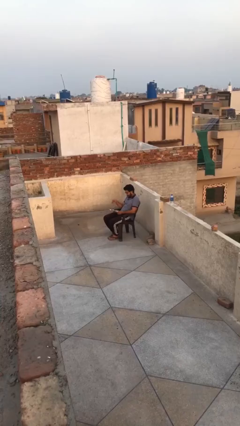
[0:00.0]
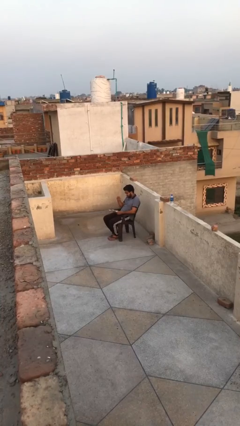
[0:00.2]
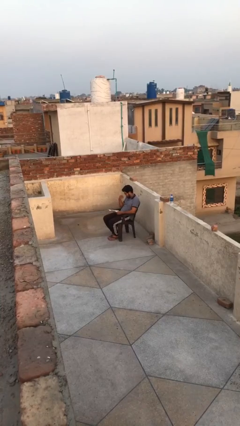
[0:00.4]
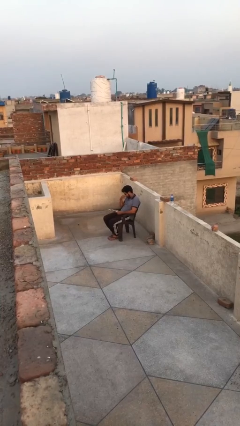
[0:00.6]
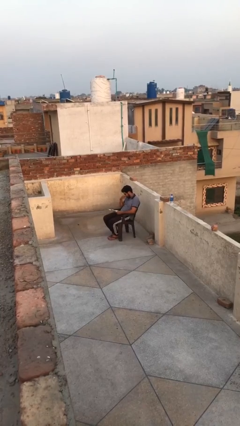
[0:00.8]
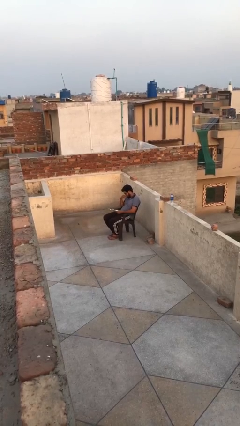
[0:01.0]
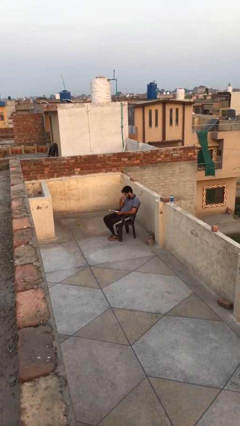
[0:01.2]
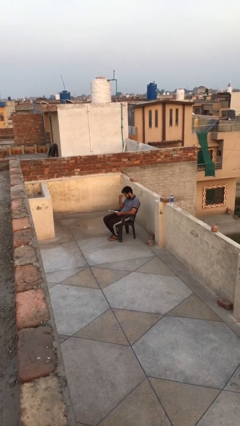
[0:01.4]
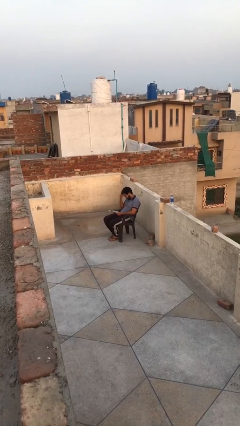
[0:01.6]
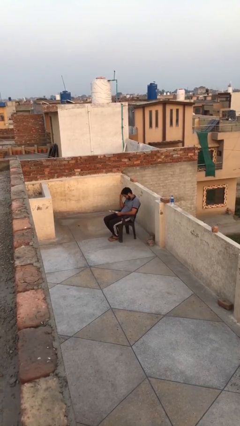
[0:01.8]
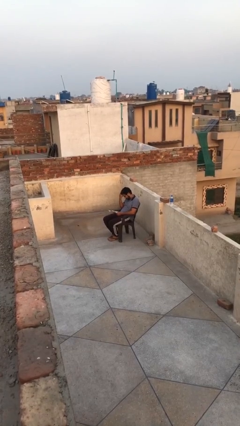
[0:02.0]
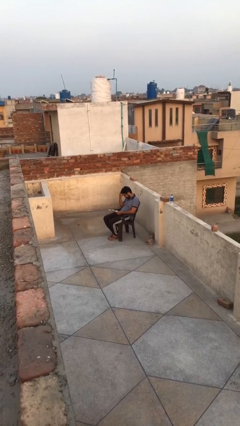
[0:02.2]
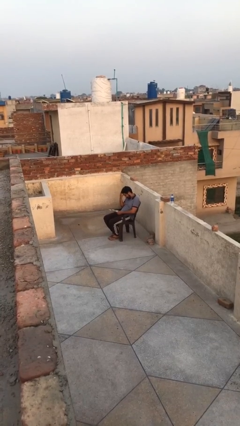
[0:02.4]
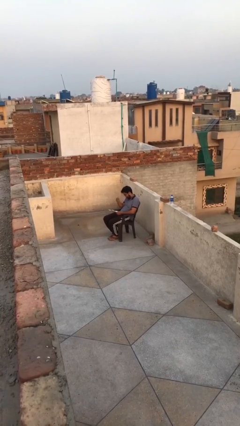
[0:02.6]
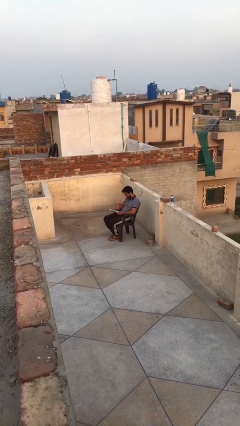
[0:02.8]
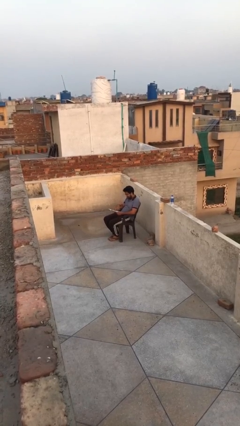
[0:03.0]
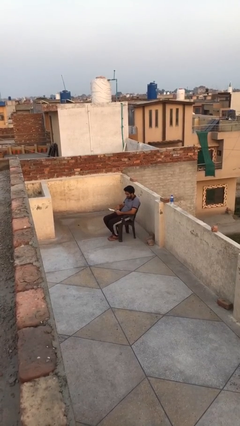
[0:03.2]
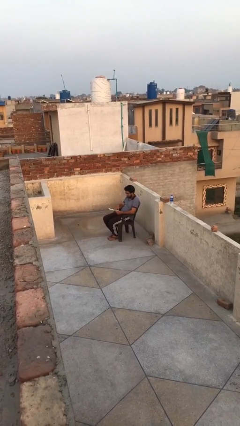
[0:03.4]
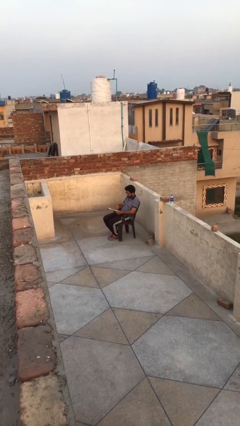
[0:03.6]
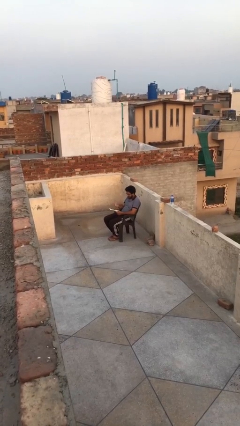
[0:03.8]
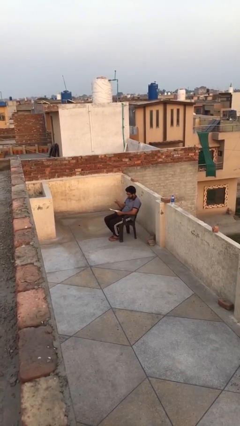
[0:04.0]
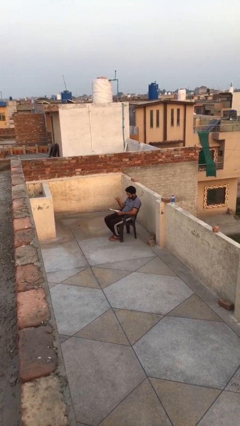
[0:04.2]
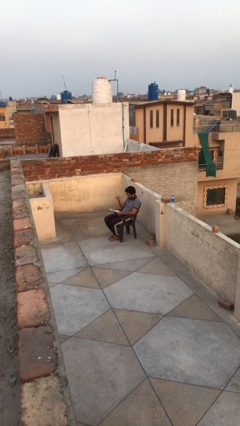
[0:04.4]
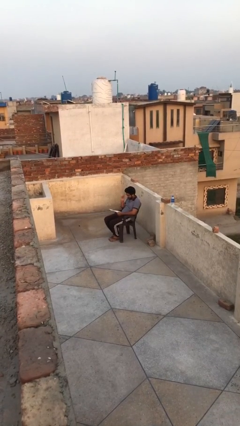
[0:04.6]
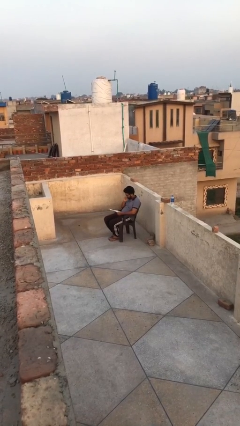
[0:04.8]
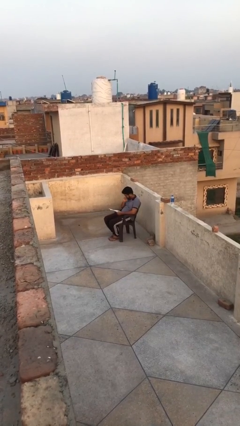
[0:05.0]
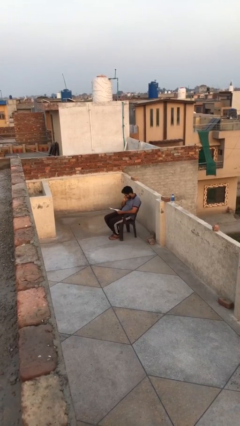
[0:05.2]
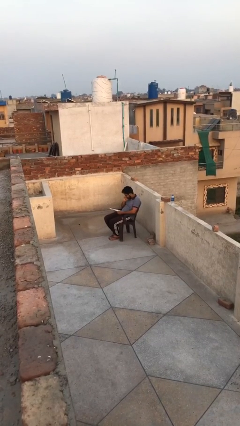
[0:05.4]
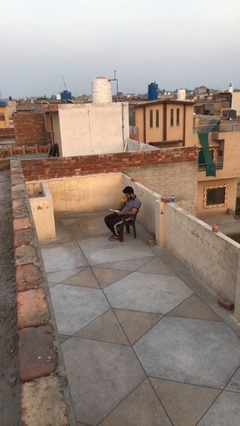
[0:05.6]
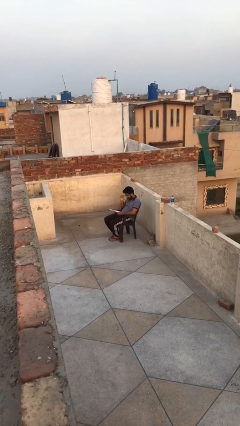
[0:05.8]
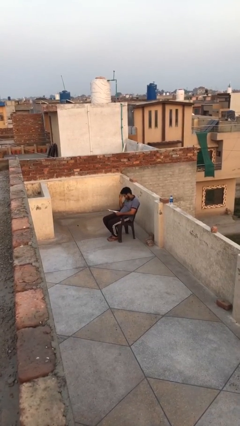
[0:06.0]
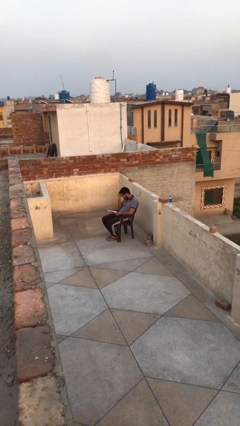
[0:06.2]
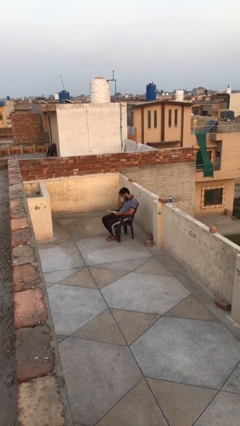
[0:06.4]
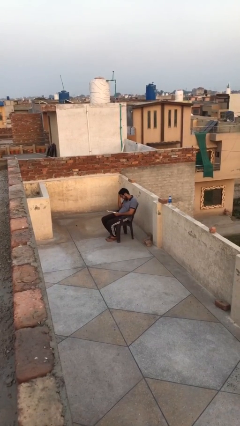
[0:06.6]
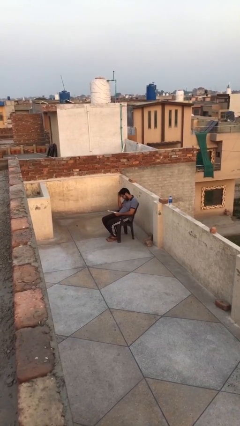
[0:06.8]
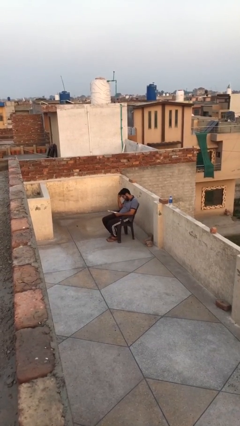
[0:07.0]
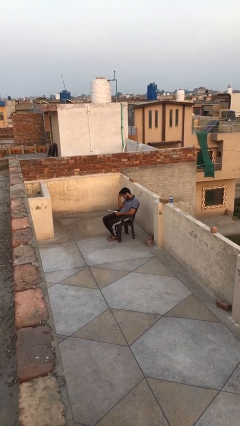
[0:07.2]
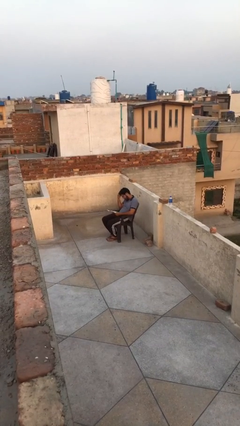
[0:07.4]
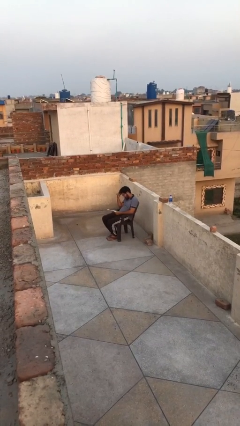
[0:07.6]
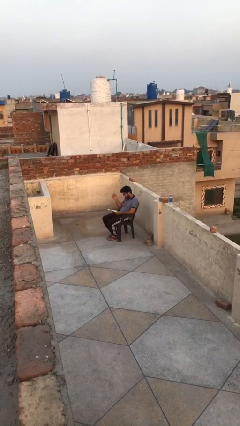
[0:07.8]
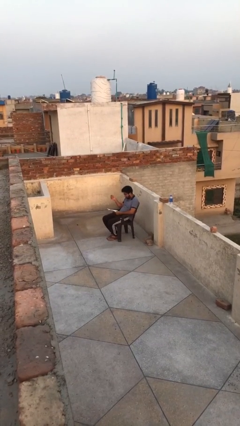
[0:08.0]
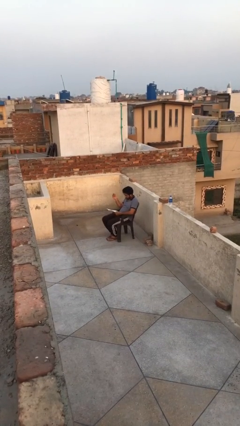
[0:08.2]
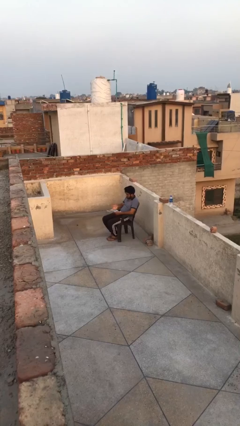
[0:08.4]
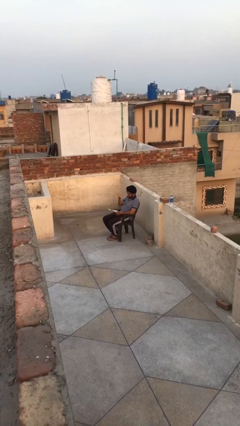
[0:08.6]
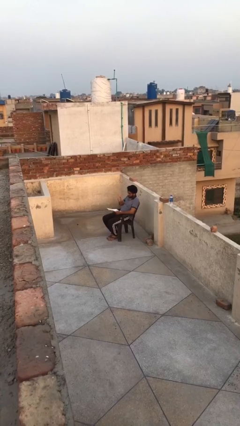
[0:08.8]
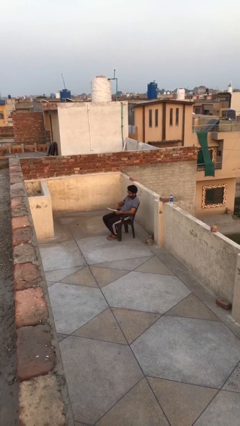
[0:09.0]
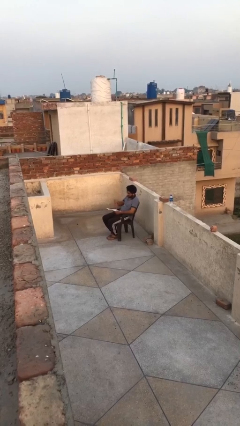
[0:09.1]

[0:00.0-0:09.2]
person reads document

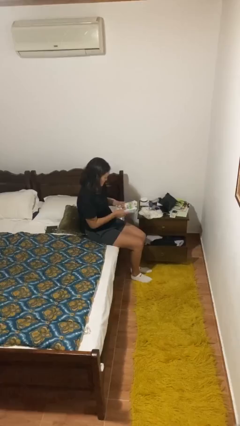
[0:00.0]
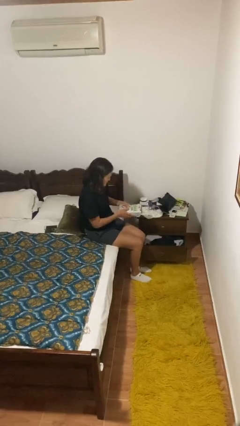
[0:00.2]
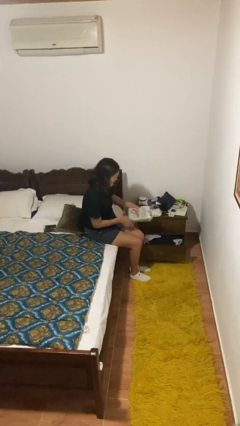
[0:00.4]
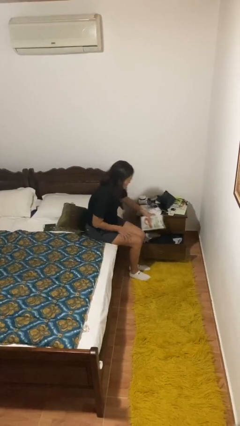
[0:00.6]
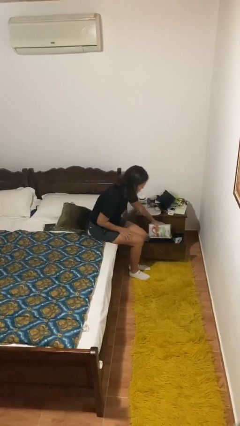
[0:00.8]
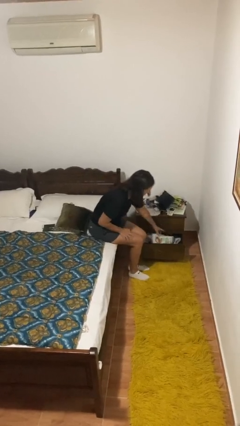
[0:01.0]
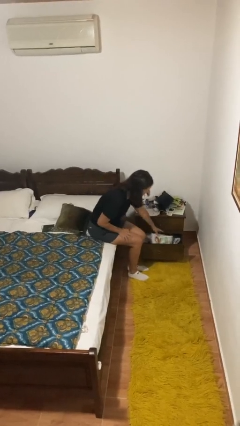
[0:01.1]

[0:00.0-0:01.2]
person puts down object into cabinet

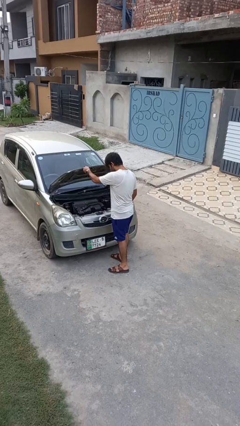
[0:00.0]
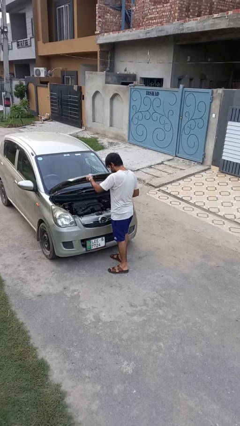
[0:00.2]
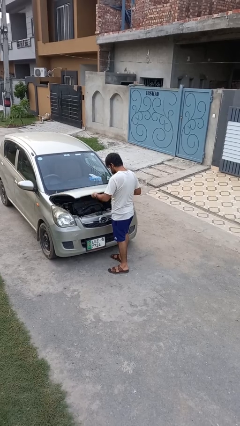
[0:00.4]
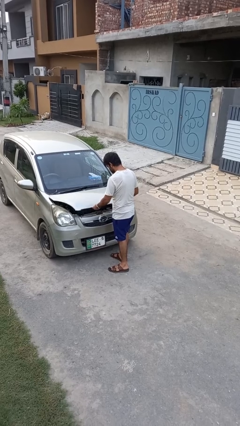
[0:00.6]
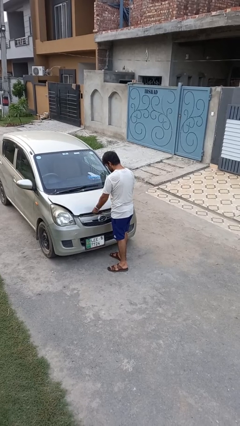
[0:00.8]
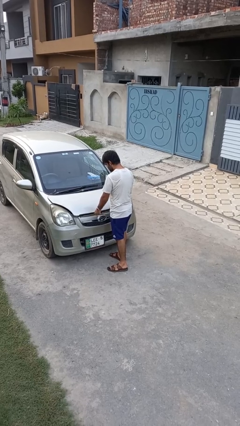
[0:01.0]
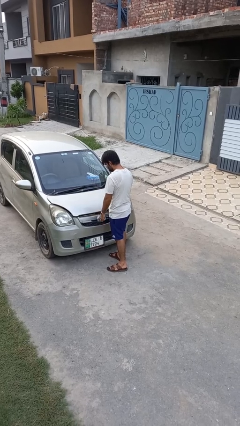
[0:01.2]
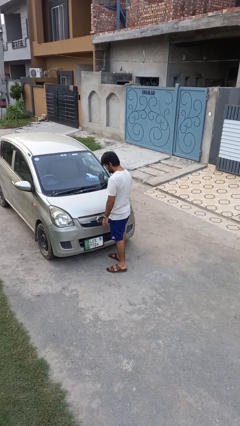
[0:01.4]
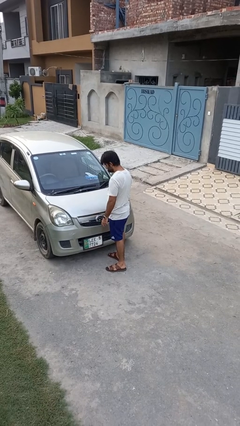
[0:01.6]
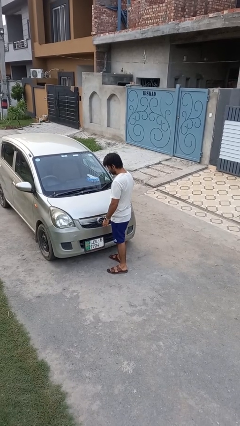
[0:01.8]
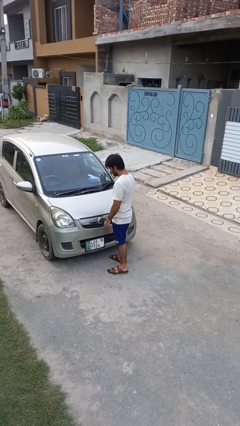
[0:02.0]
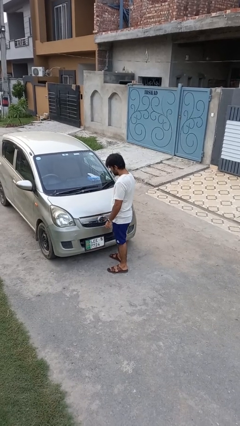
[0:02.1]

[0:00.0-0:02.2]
person closes car hood

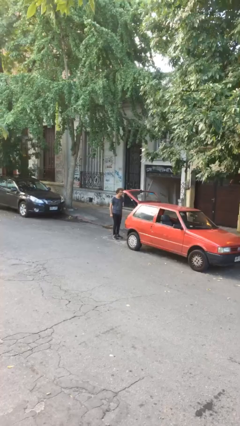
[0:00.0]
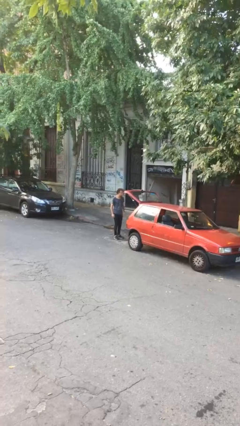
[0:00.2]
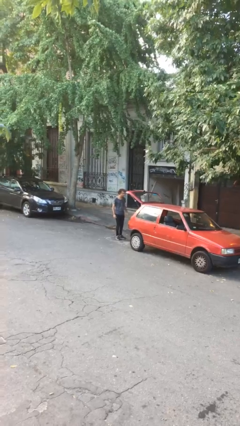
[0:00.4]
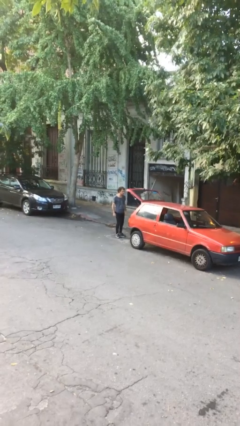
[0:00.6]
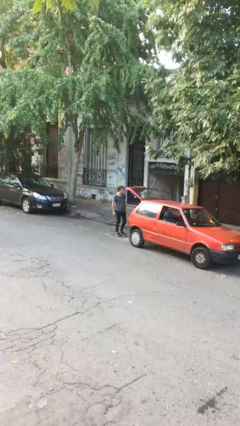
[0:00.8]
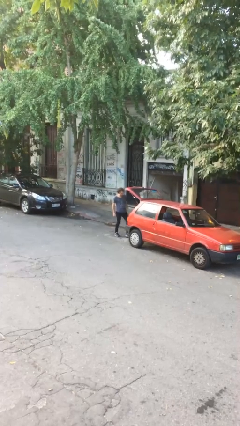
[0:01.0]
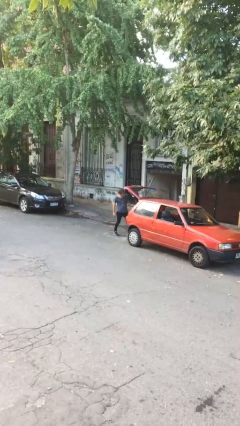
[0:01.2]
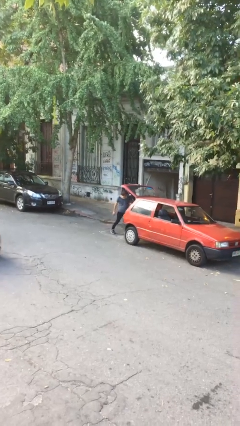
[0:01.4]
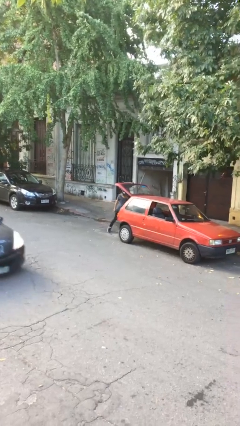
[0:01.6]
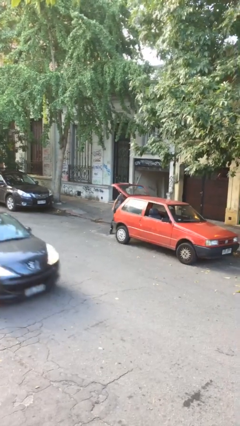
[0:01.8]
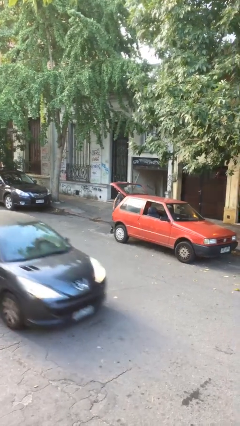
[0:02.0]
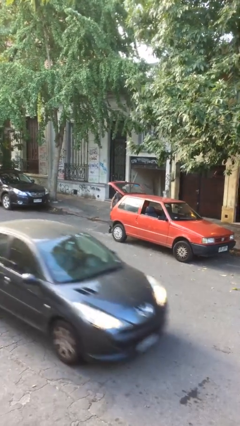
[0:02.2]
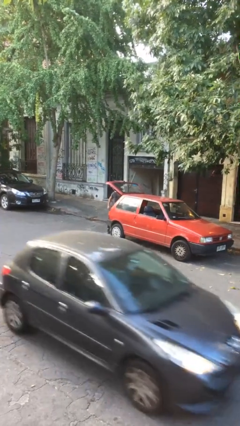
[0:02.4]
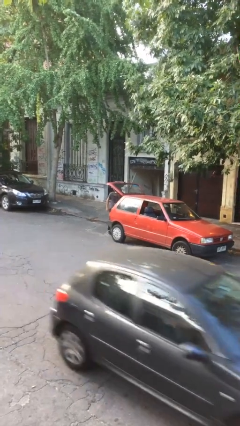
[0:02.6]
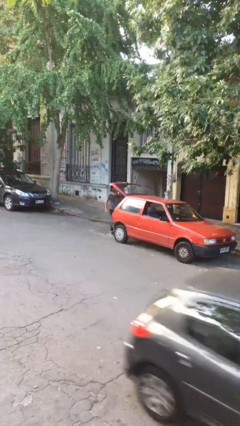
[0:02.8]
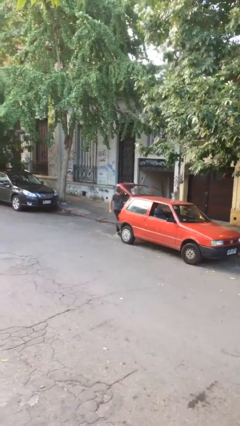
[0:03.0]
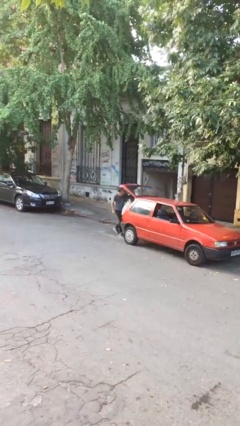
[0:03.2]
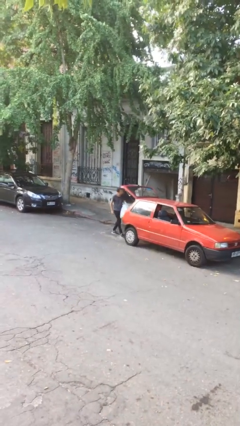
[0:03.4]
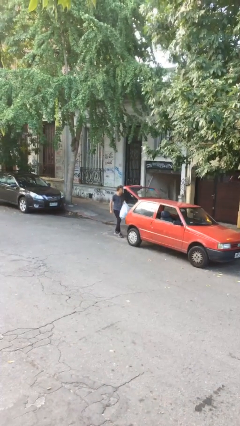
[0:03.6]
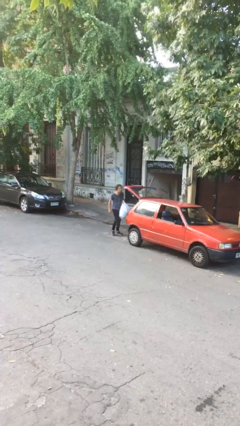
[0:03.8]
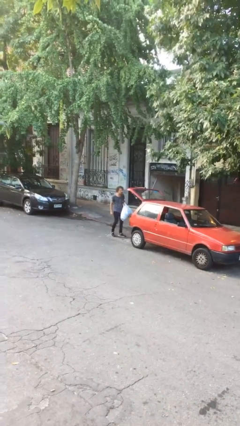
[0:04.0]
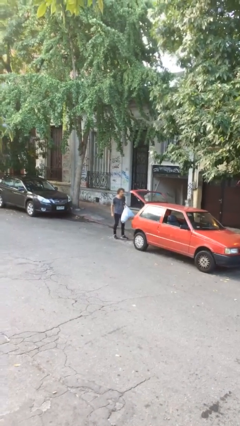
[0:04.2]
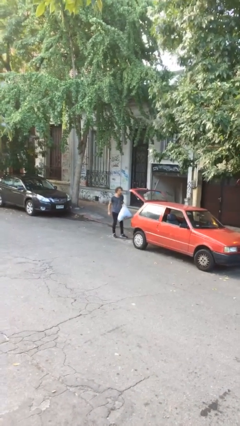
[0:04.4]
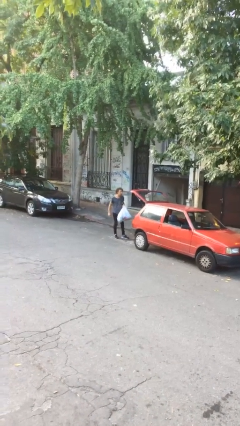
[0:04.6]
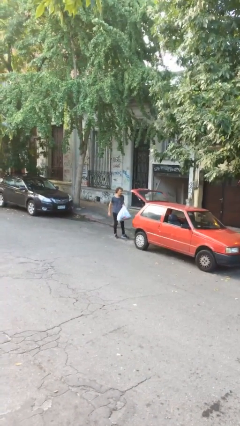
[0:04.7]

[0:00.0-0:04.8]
person unloads car

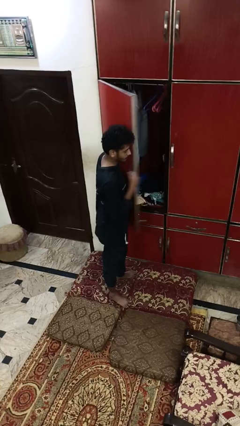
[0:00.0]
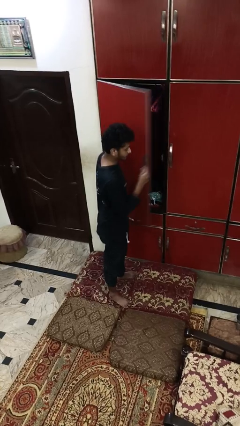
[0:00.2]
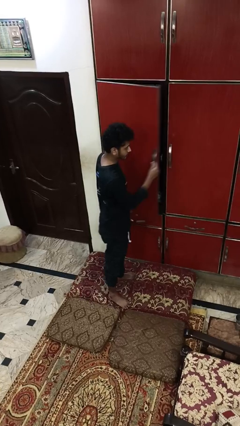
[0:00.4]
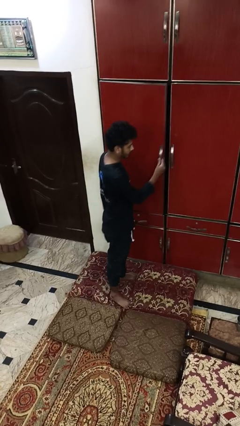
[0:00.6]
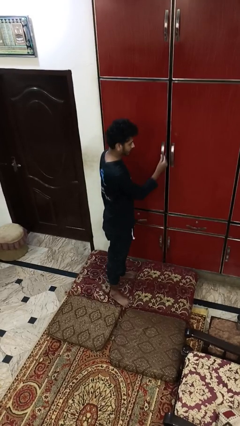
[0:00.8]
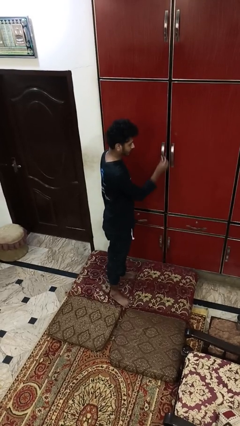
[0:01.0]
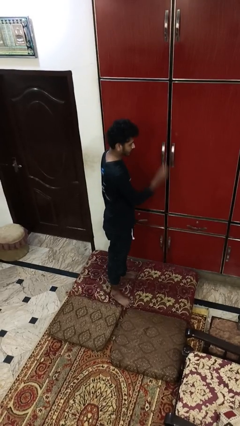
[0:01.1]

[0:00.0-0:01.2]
person closes closet door
